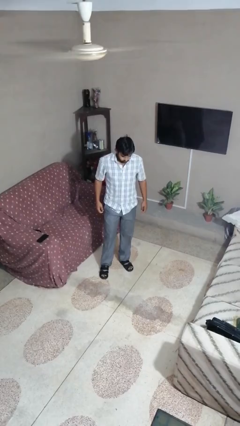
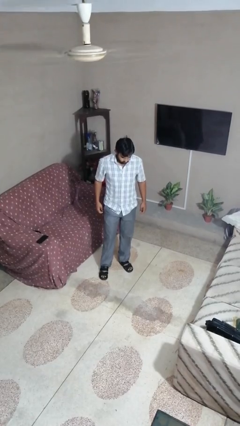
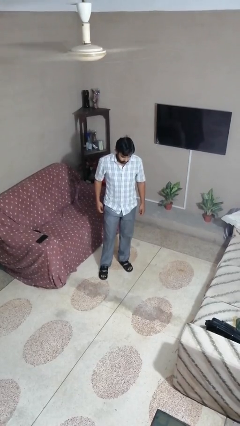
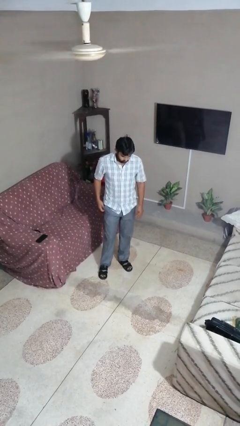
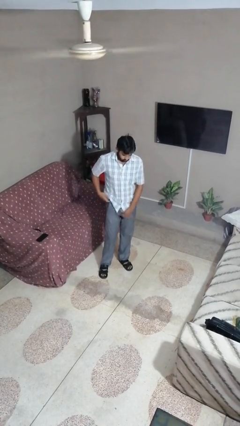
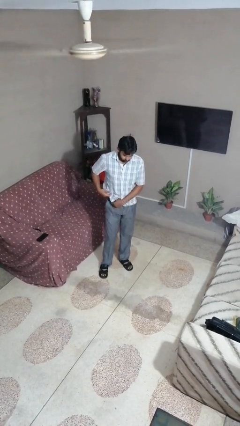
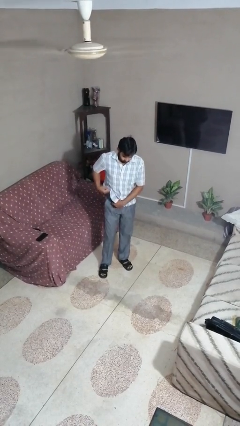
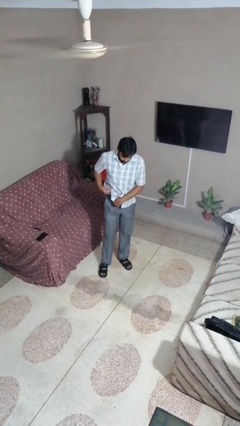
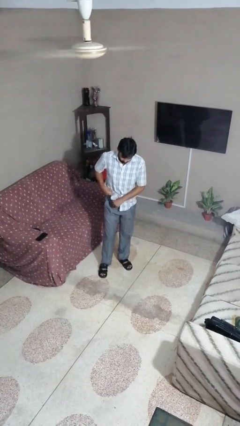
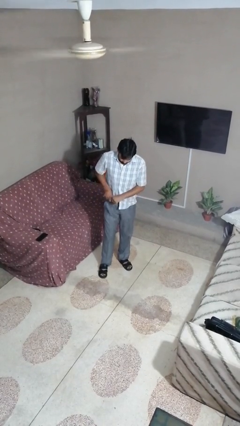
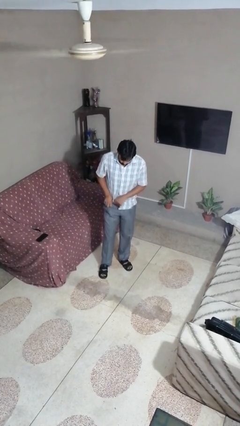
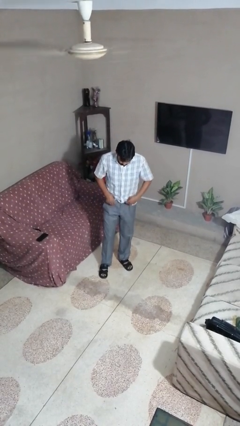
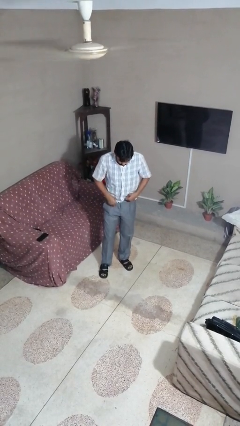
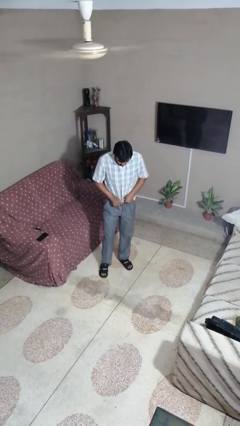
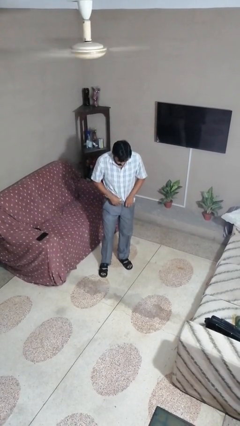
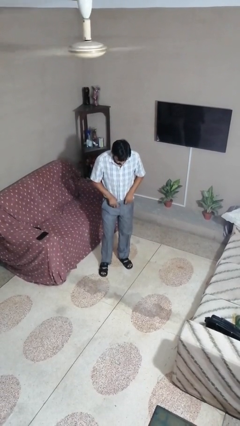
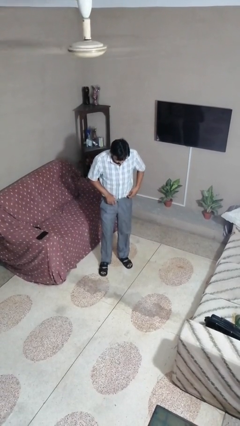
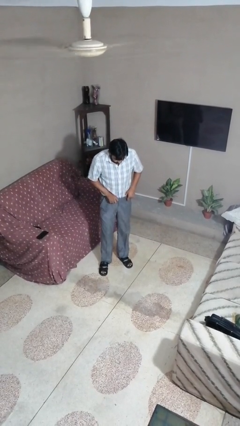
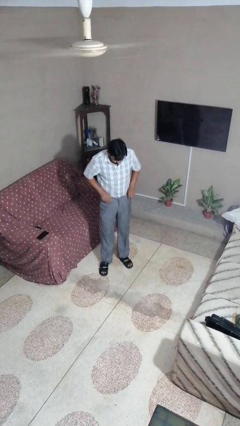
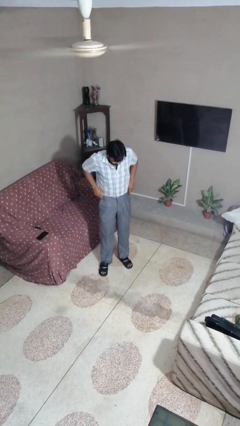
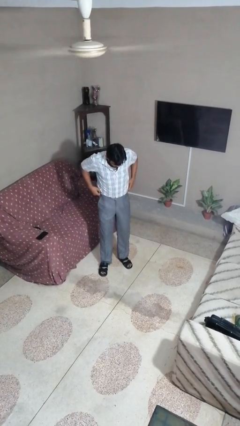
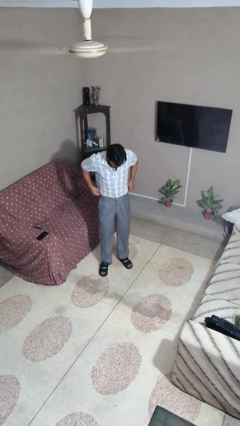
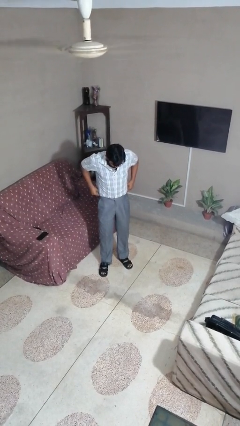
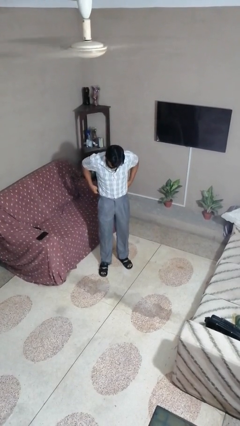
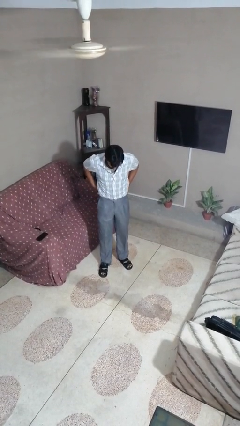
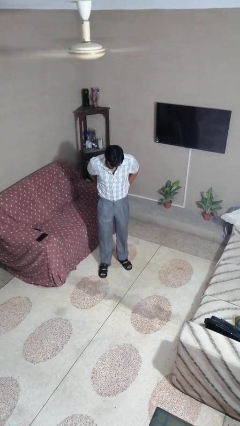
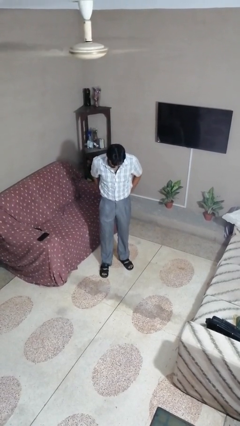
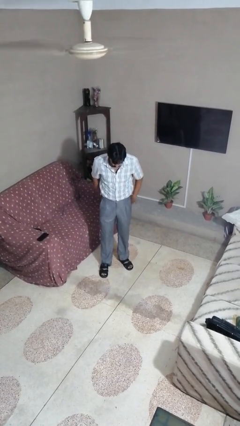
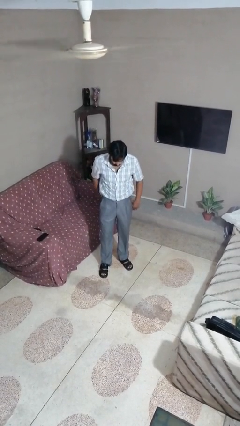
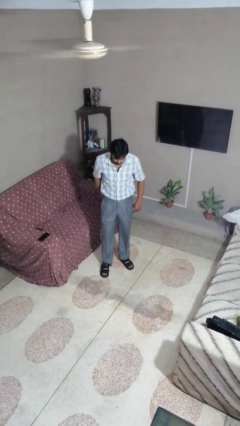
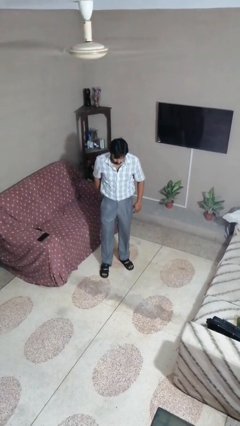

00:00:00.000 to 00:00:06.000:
person tucks in shirt

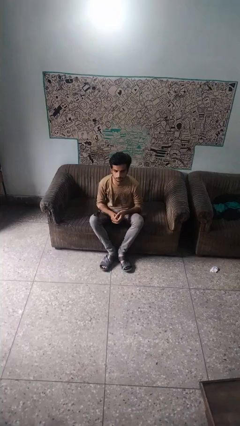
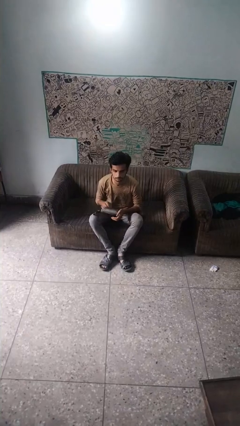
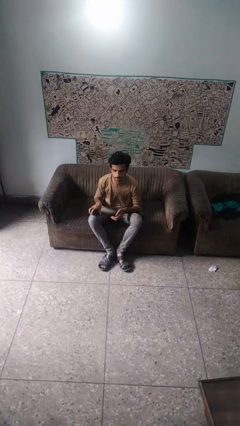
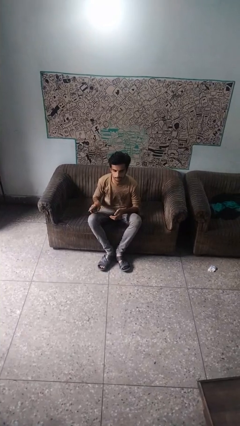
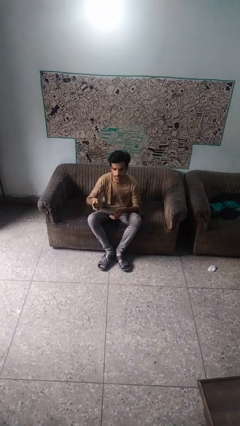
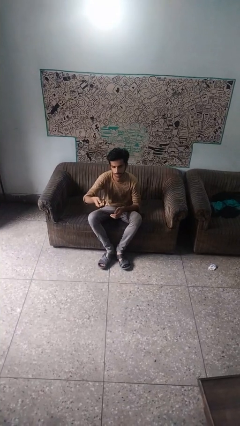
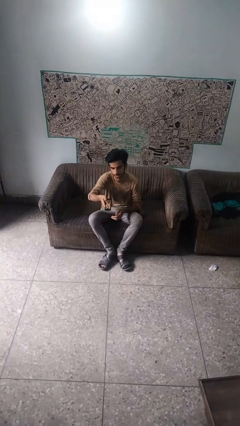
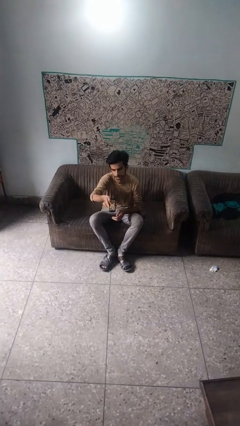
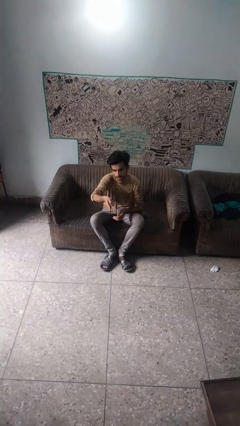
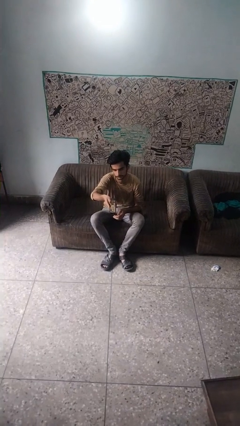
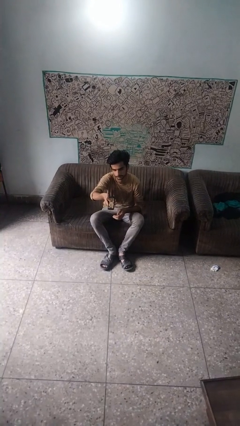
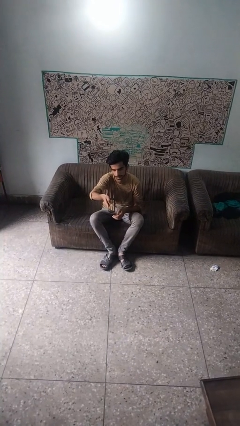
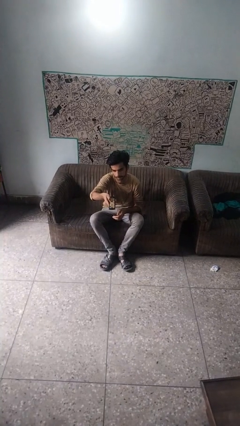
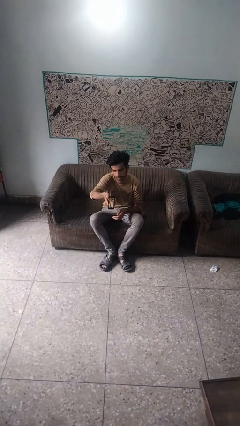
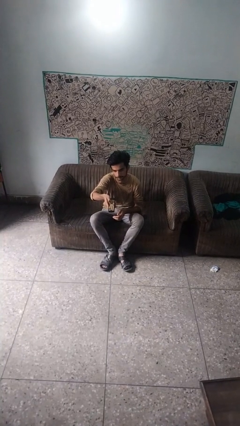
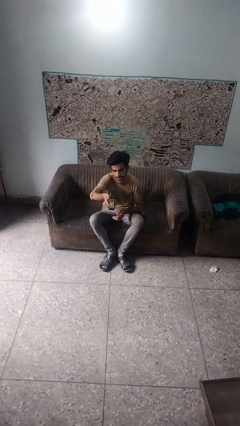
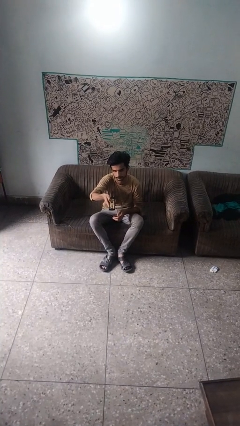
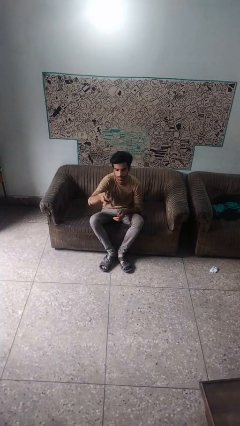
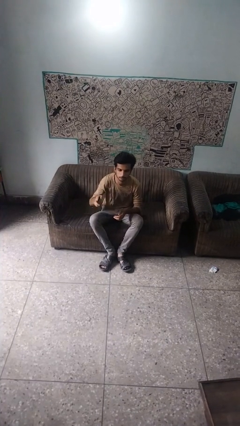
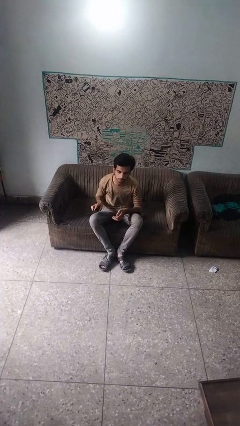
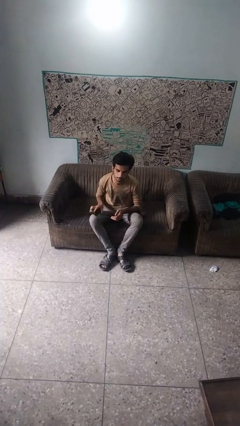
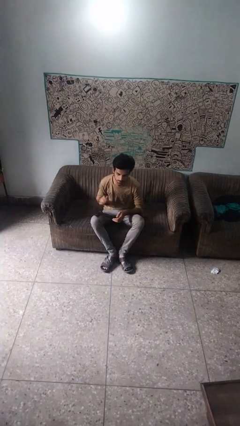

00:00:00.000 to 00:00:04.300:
person uses television remote

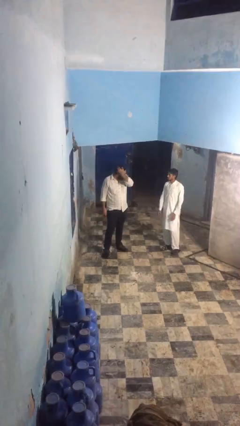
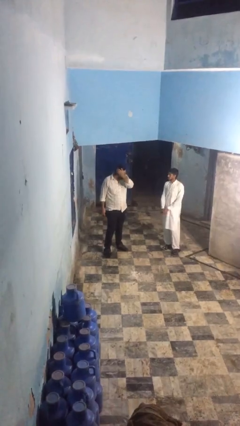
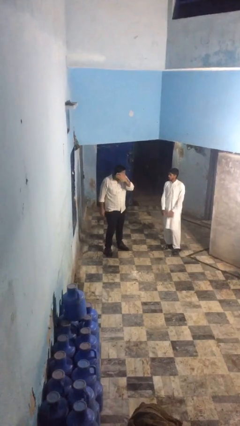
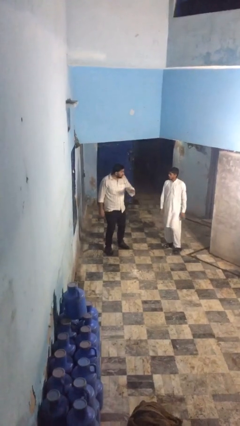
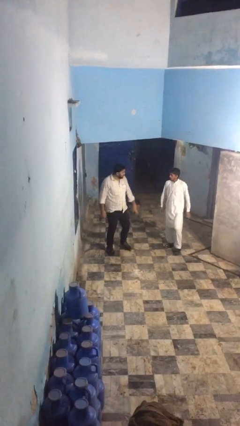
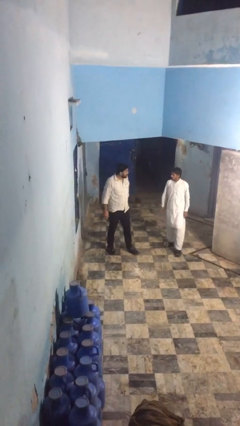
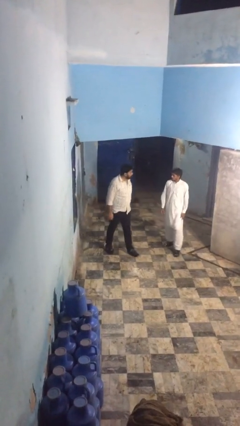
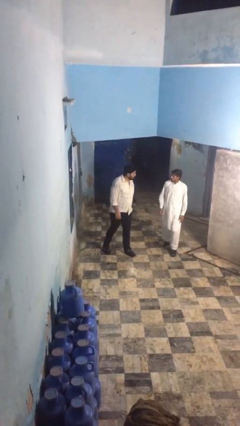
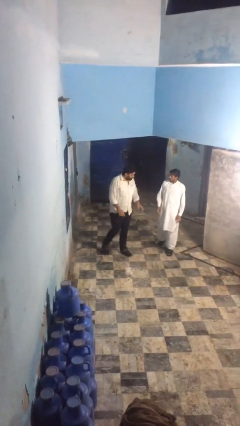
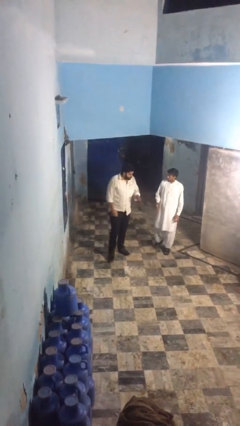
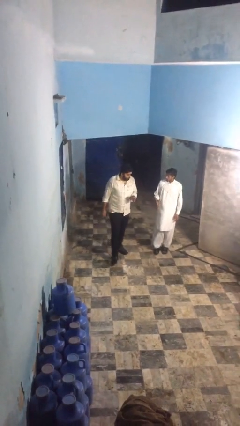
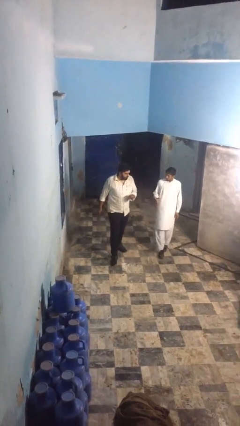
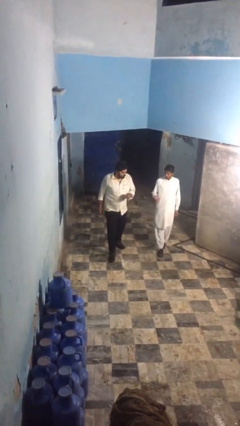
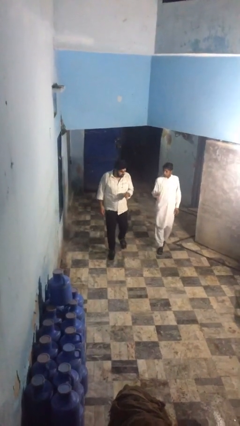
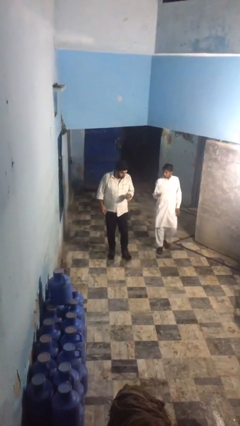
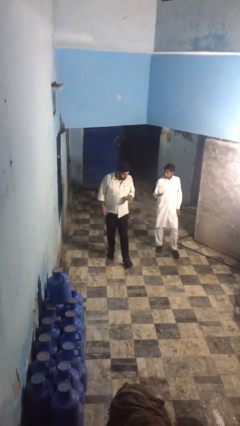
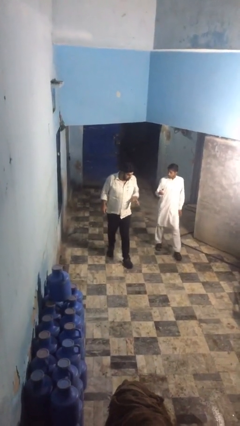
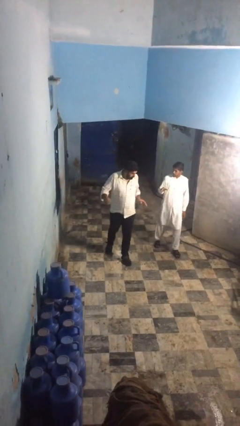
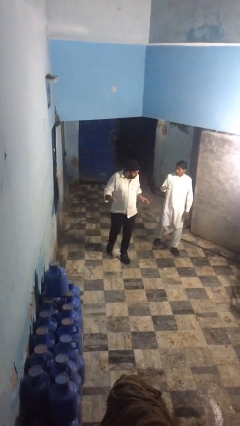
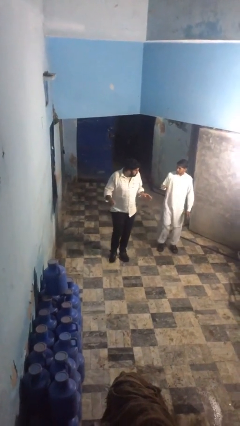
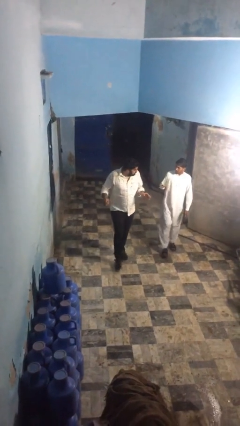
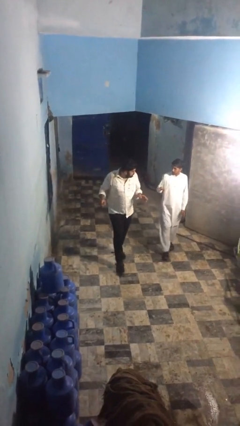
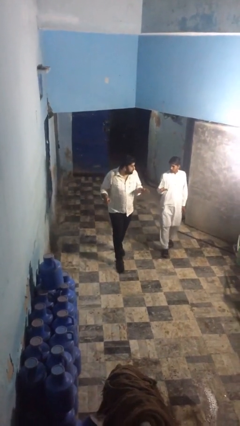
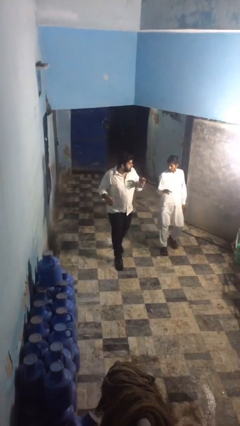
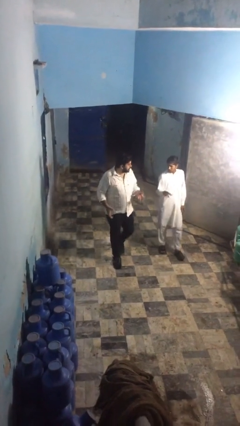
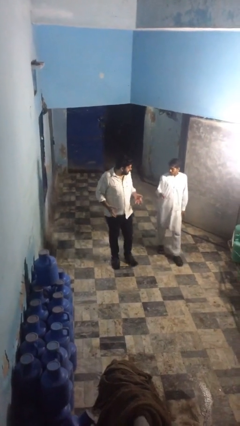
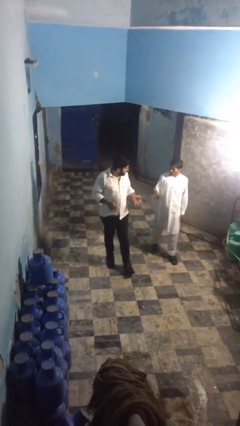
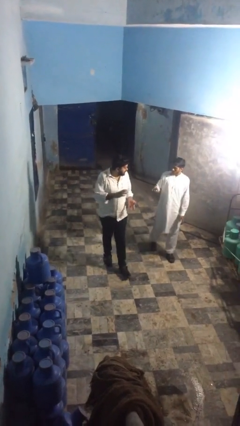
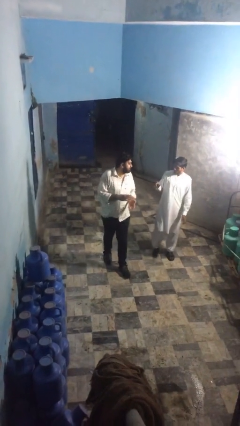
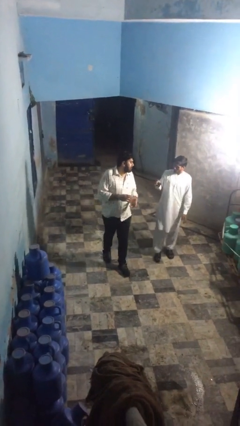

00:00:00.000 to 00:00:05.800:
person talks to person

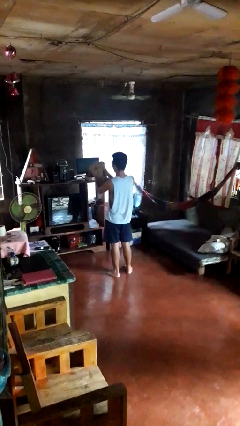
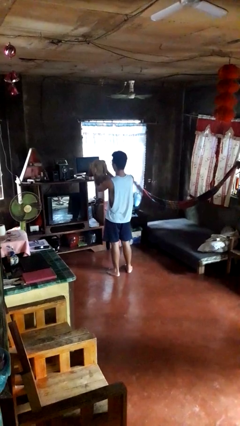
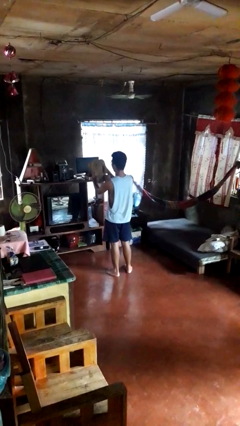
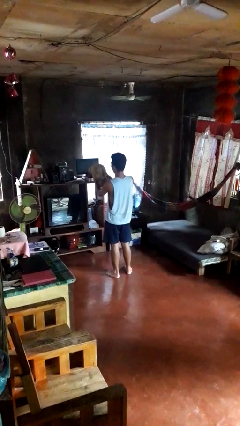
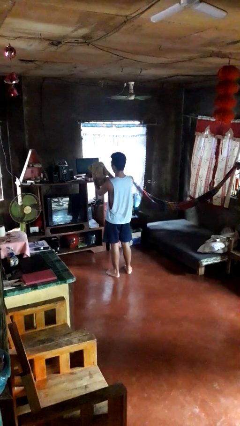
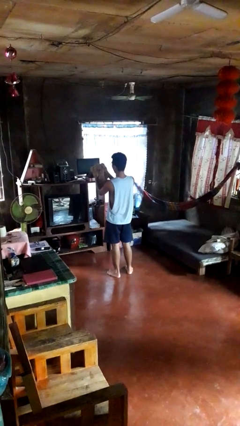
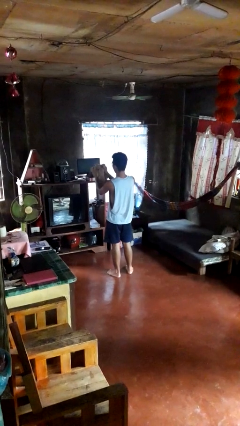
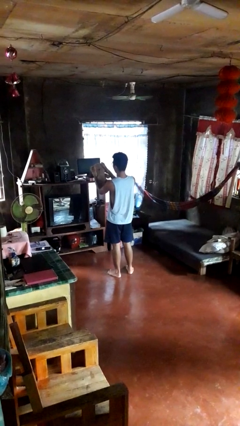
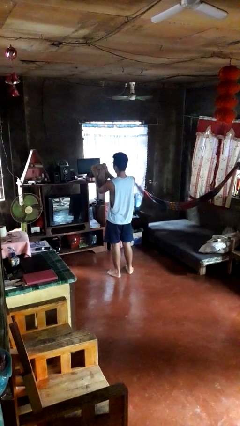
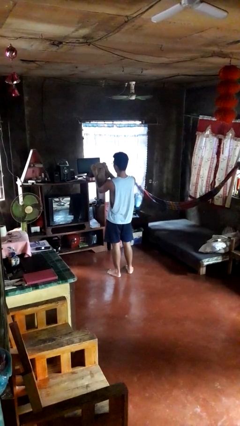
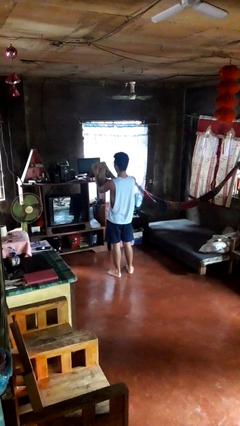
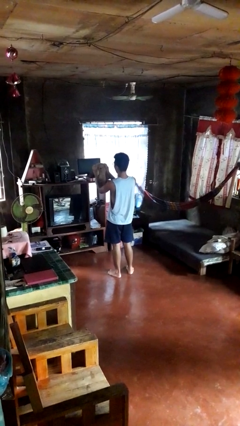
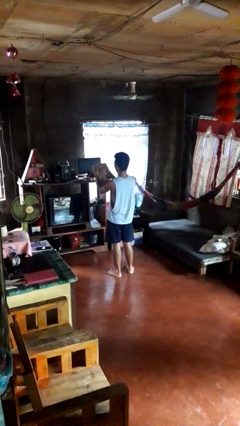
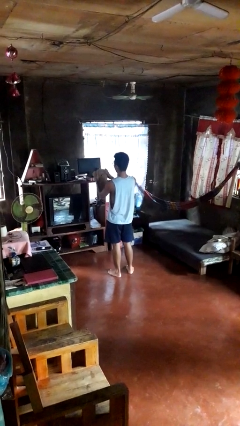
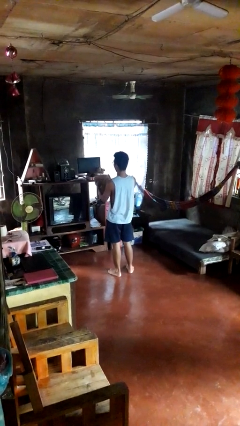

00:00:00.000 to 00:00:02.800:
person squeezes object
